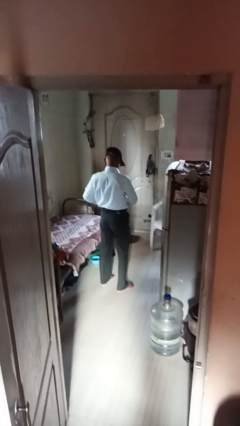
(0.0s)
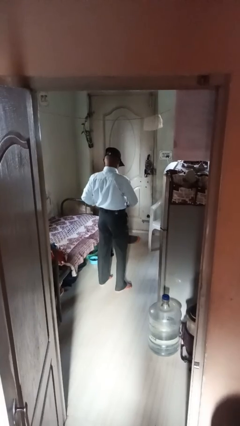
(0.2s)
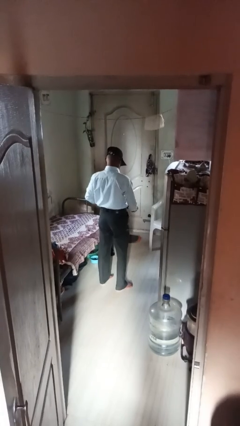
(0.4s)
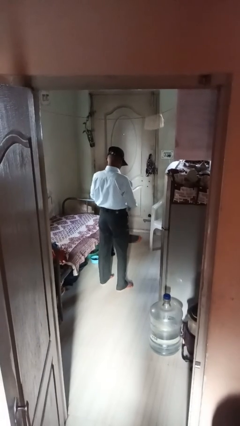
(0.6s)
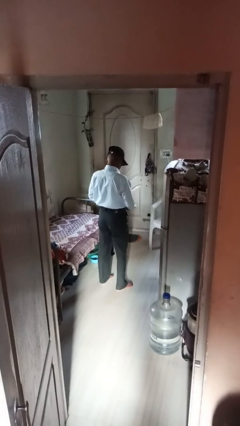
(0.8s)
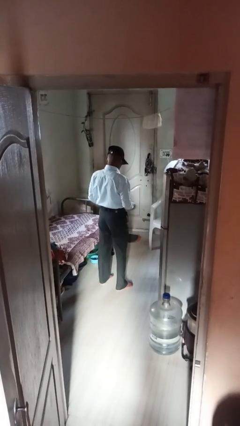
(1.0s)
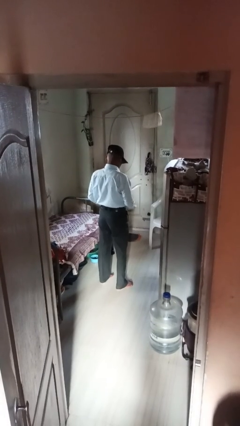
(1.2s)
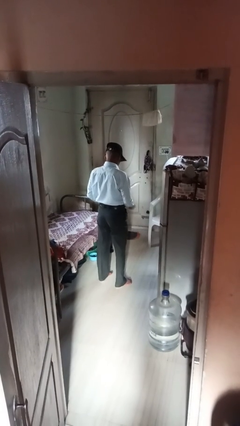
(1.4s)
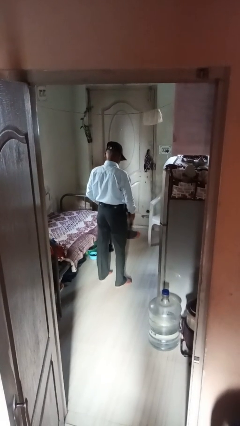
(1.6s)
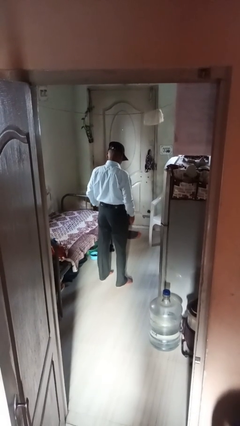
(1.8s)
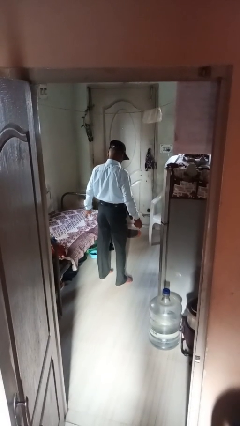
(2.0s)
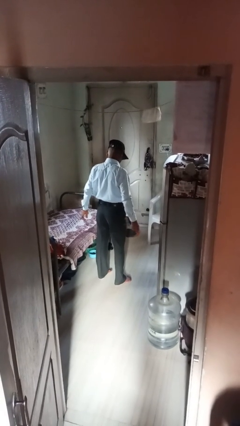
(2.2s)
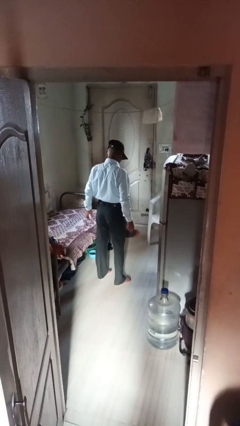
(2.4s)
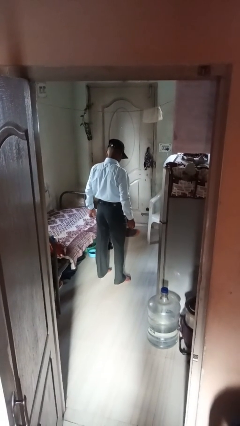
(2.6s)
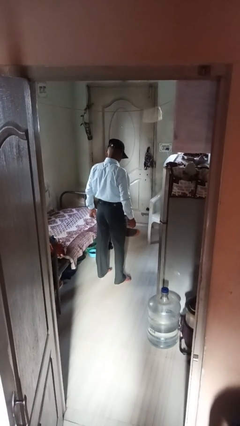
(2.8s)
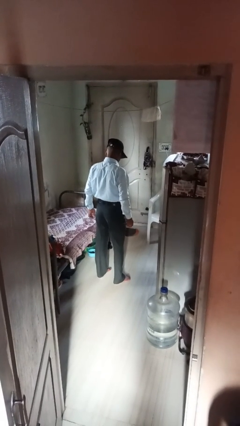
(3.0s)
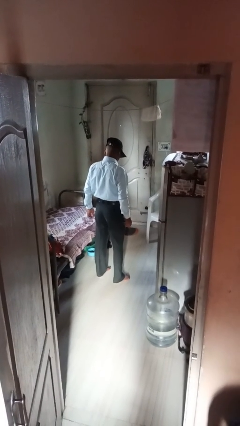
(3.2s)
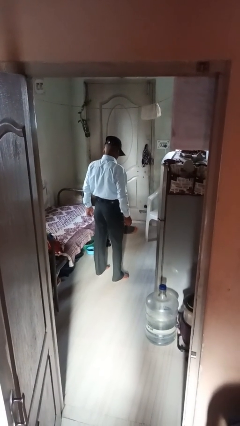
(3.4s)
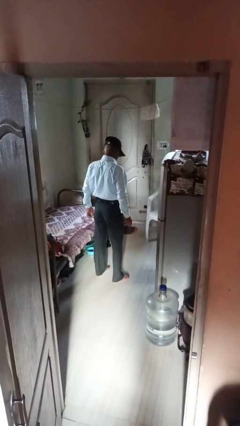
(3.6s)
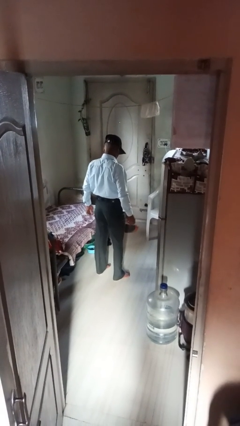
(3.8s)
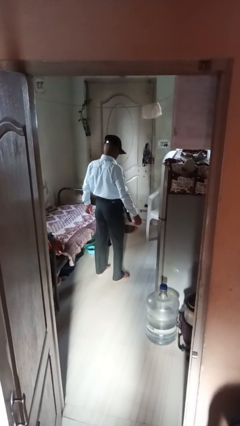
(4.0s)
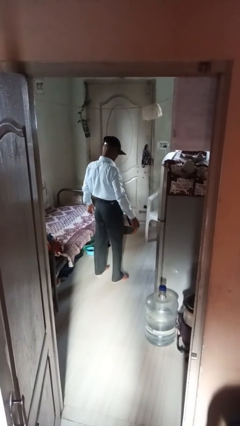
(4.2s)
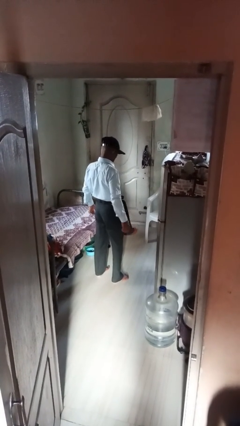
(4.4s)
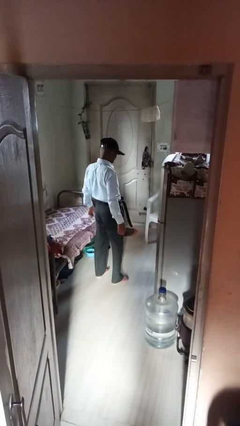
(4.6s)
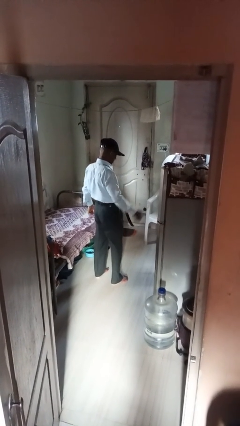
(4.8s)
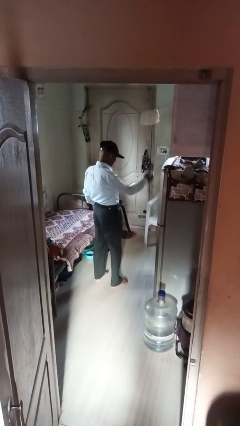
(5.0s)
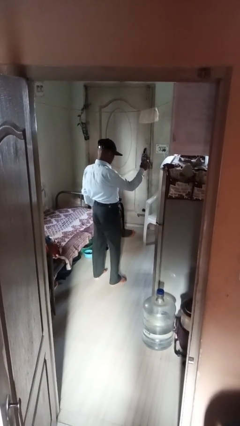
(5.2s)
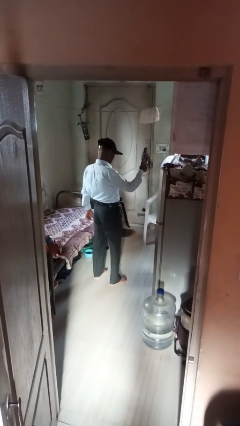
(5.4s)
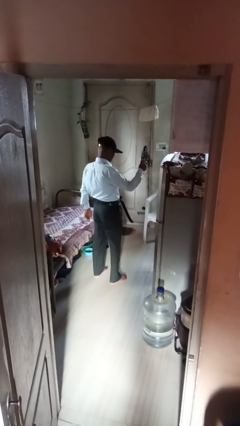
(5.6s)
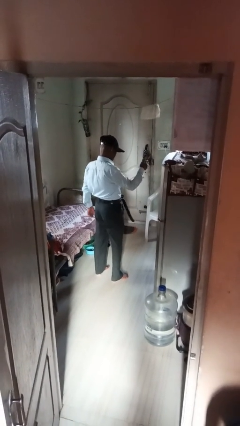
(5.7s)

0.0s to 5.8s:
person takes off belt

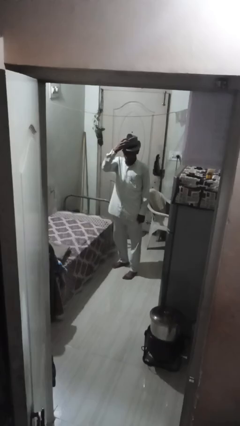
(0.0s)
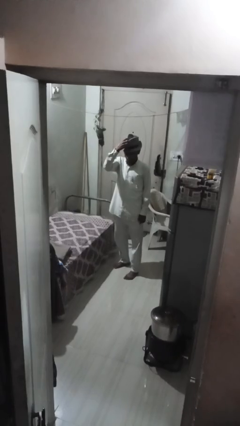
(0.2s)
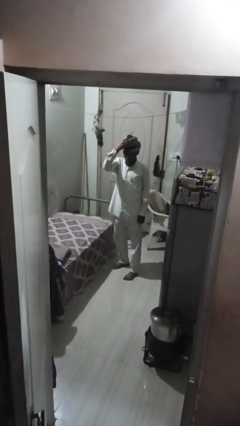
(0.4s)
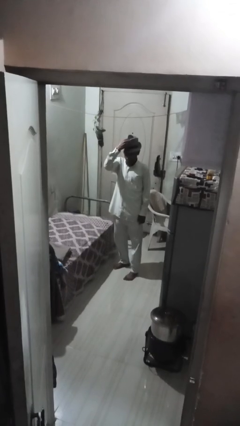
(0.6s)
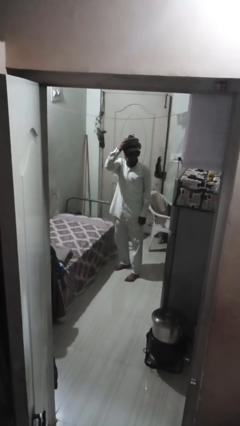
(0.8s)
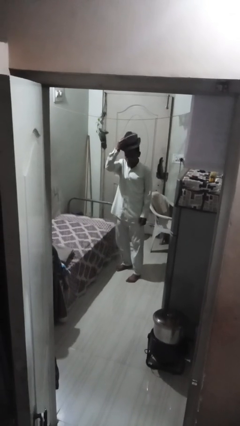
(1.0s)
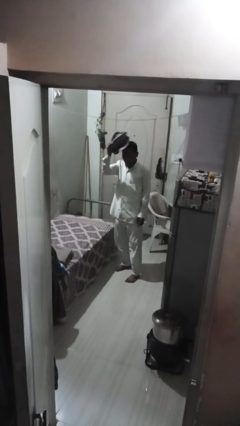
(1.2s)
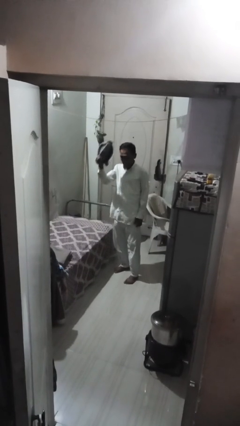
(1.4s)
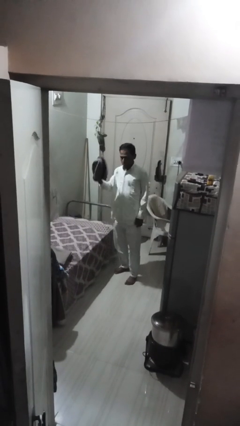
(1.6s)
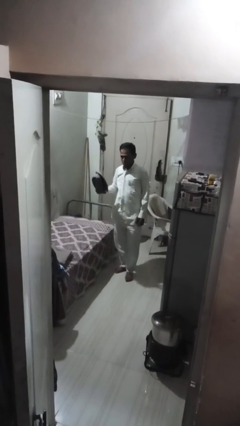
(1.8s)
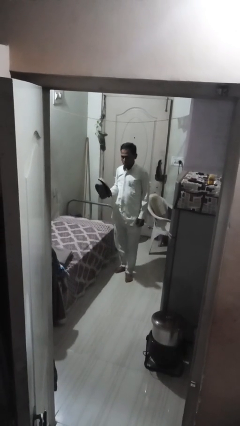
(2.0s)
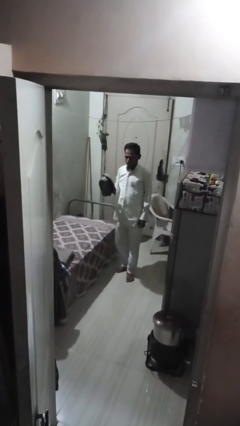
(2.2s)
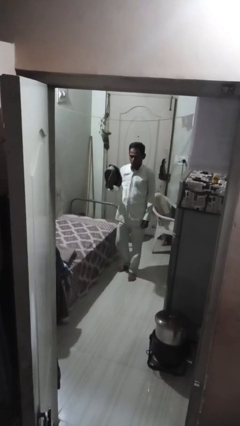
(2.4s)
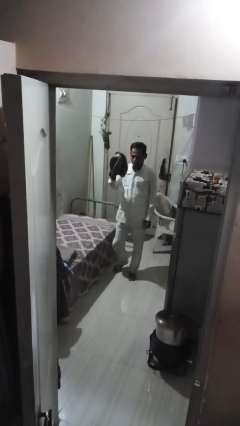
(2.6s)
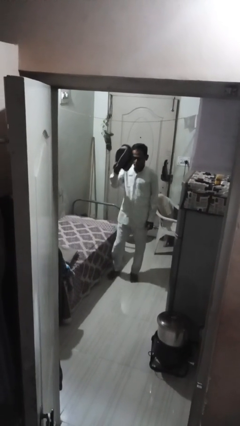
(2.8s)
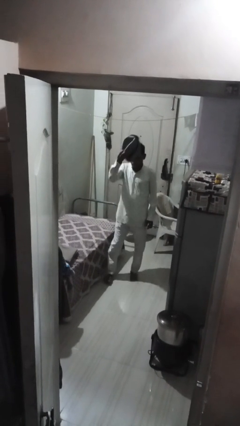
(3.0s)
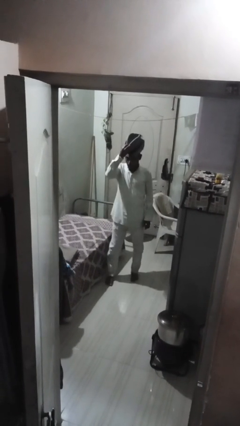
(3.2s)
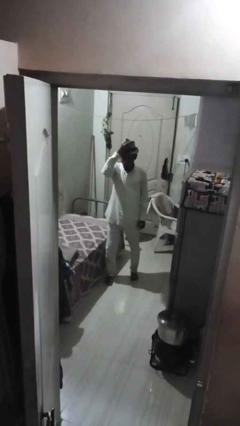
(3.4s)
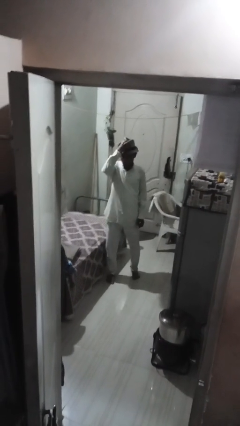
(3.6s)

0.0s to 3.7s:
person takes off hat

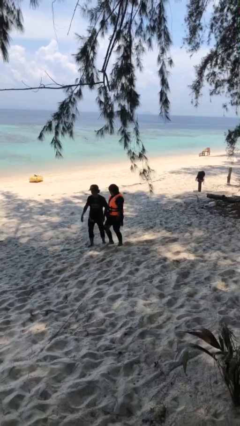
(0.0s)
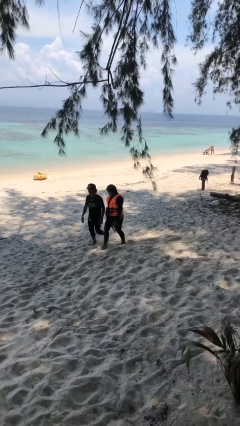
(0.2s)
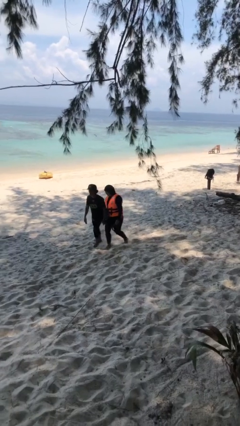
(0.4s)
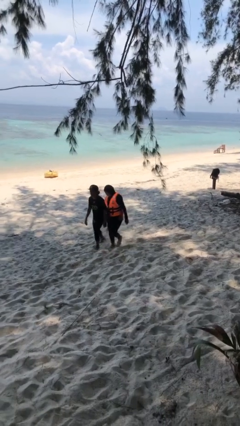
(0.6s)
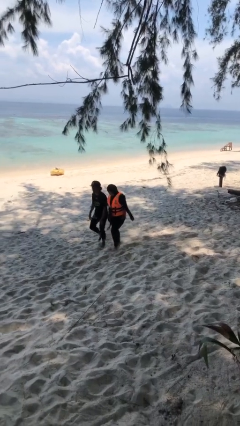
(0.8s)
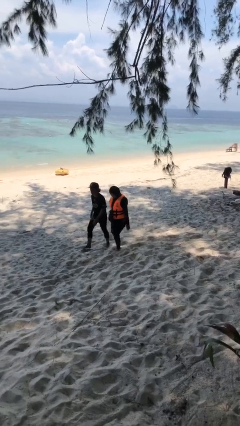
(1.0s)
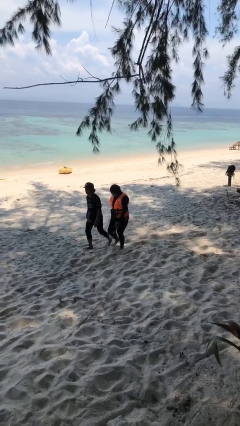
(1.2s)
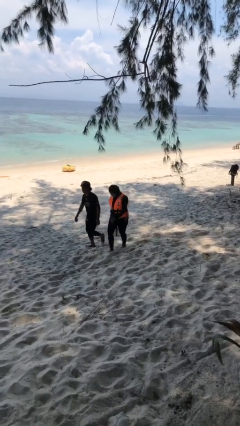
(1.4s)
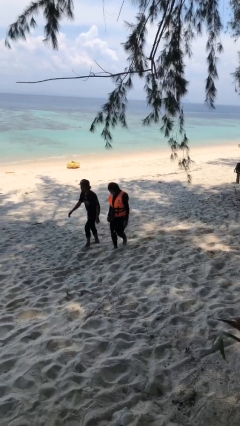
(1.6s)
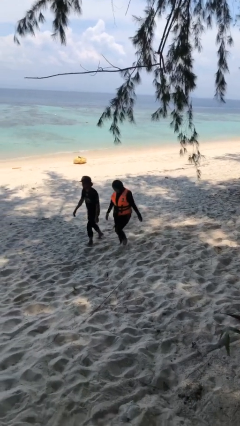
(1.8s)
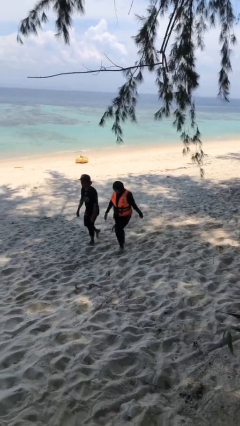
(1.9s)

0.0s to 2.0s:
person talks to person

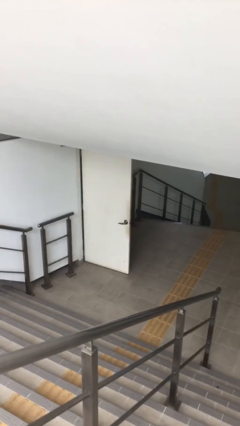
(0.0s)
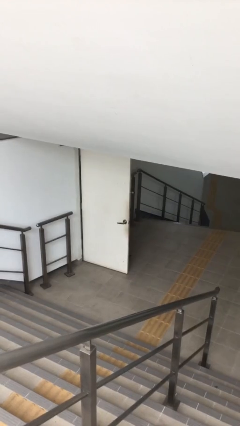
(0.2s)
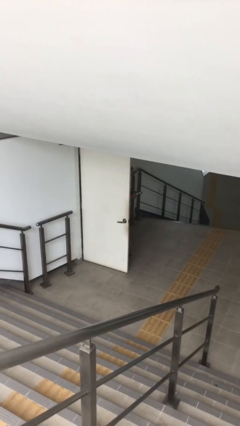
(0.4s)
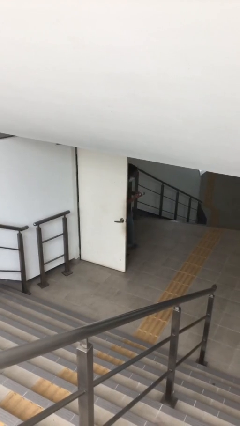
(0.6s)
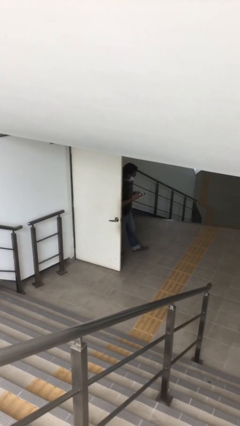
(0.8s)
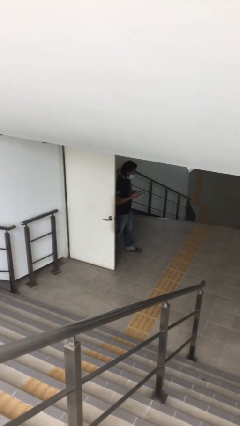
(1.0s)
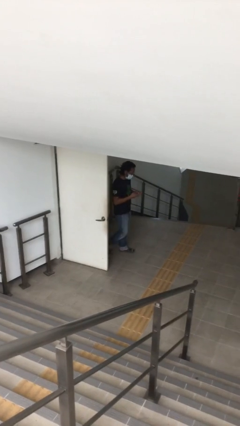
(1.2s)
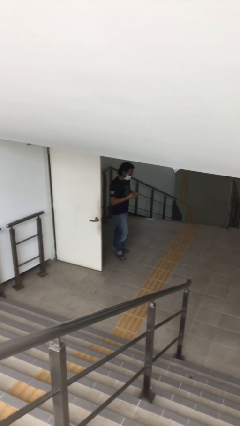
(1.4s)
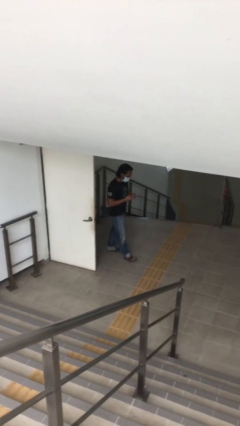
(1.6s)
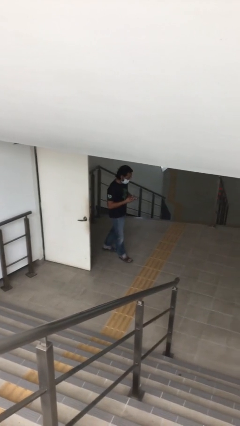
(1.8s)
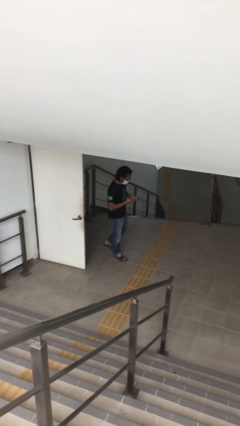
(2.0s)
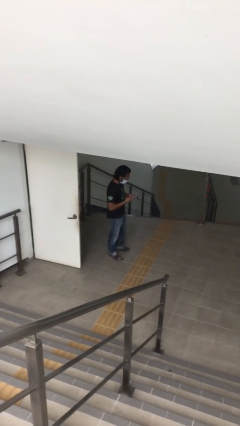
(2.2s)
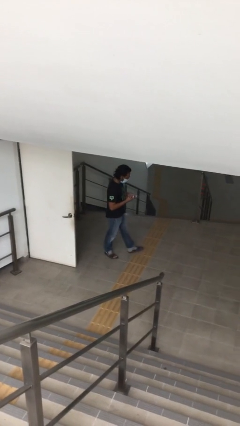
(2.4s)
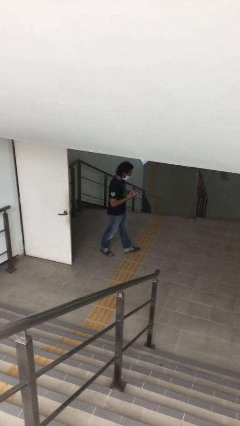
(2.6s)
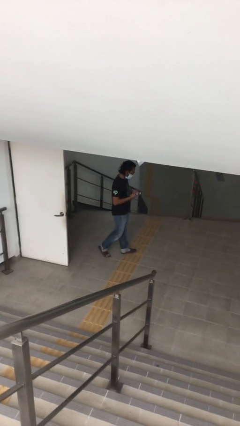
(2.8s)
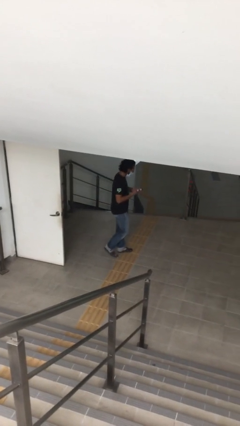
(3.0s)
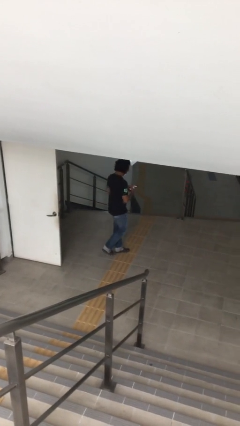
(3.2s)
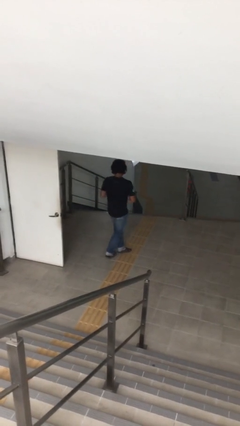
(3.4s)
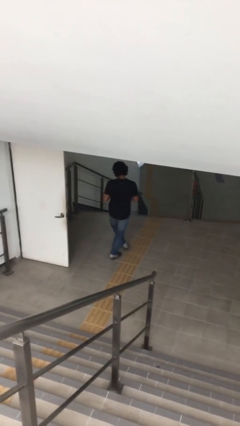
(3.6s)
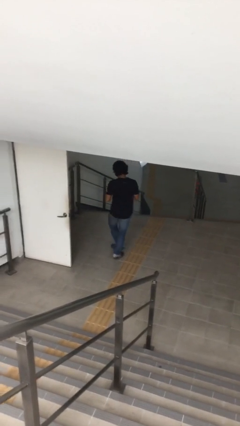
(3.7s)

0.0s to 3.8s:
person enters scene through structure

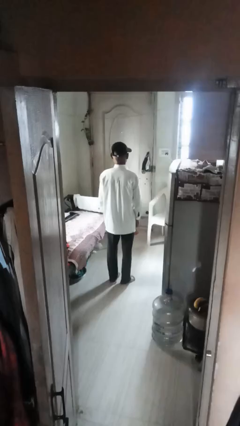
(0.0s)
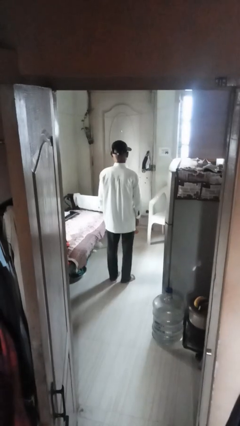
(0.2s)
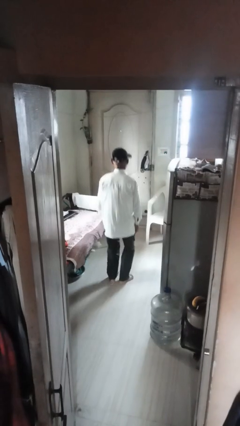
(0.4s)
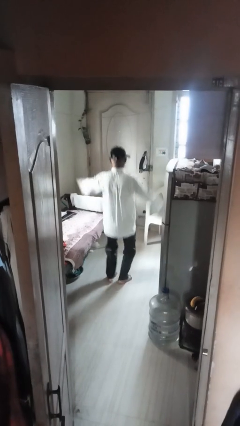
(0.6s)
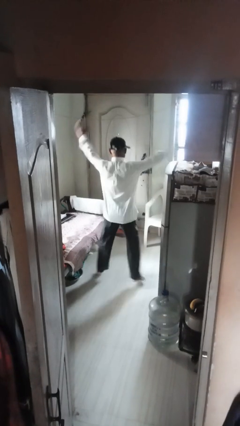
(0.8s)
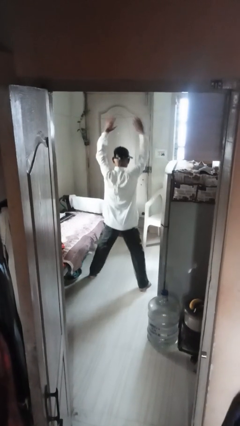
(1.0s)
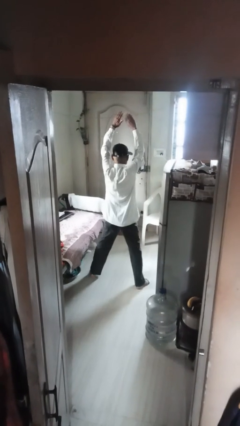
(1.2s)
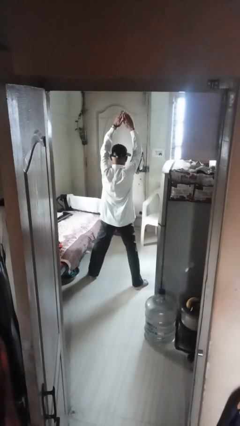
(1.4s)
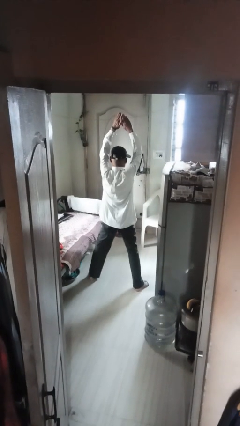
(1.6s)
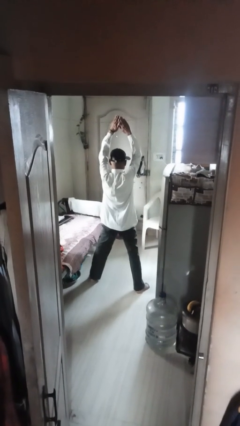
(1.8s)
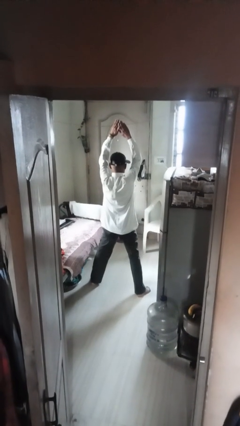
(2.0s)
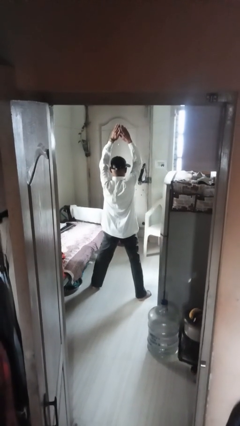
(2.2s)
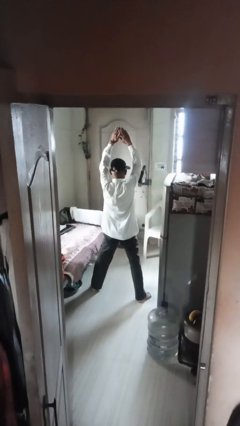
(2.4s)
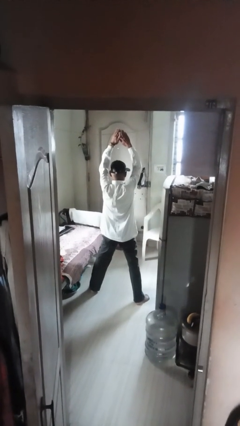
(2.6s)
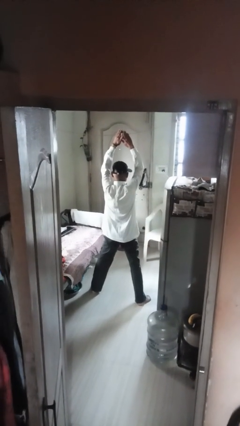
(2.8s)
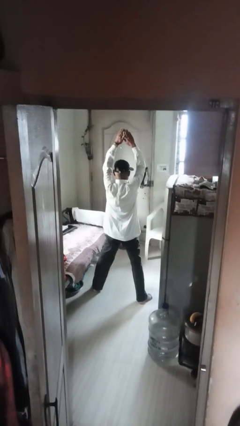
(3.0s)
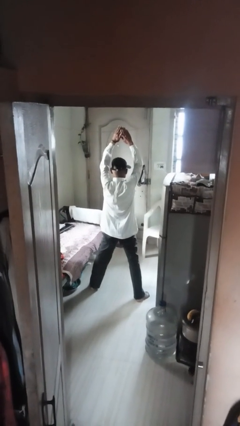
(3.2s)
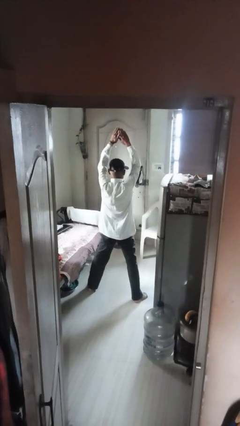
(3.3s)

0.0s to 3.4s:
person exercises with jumping jacks
